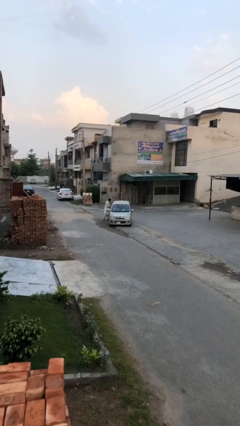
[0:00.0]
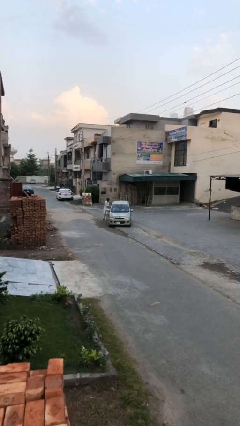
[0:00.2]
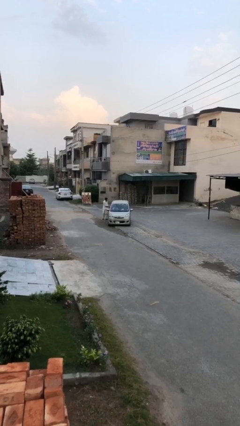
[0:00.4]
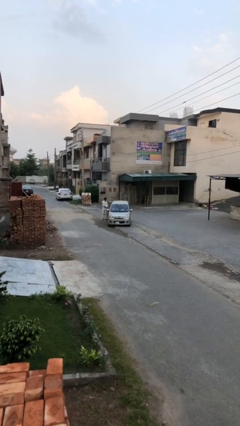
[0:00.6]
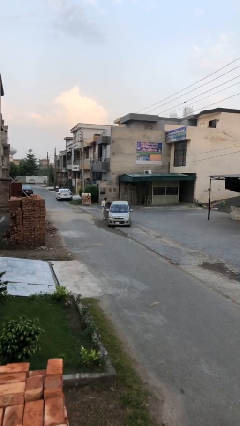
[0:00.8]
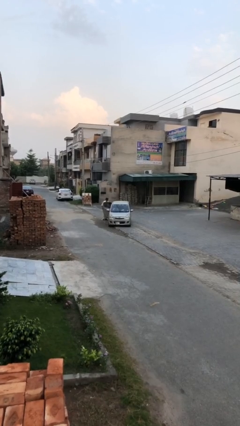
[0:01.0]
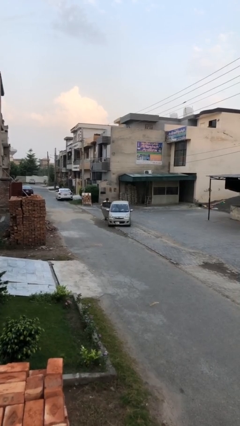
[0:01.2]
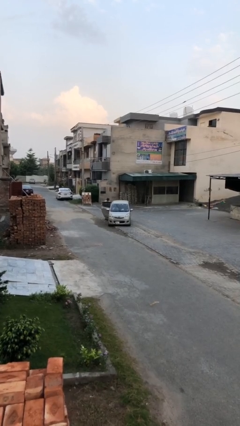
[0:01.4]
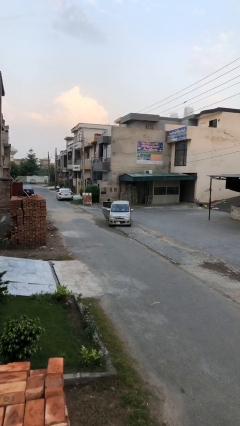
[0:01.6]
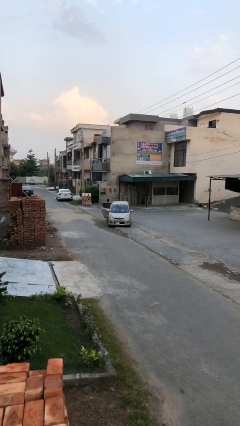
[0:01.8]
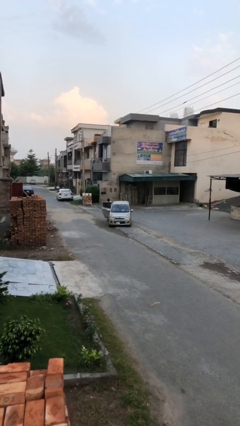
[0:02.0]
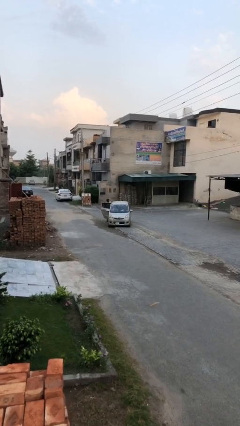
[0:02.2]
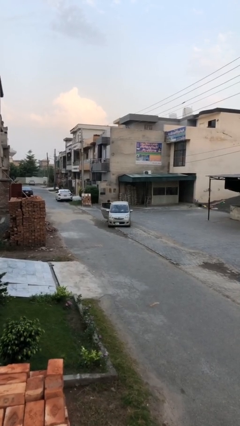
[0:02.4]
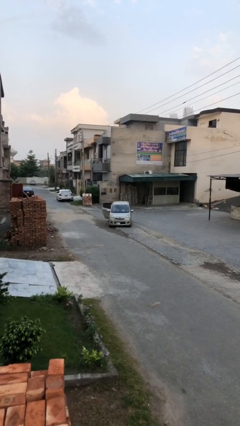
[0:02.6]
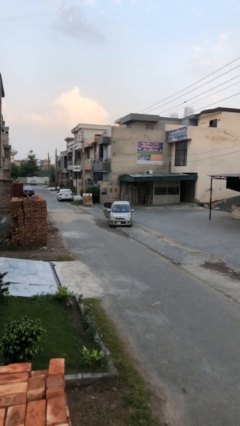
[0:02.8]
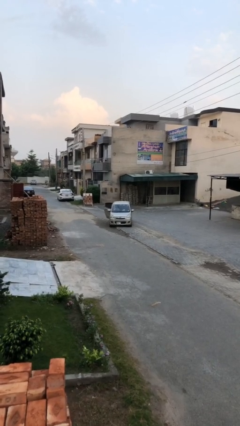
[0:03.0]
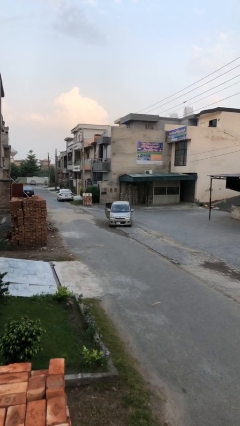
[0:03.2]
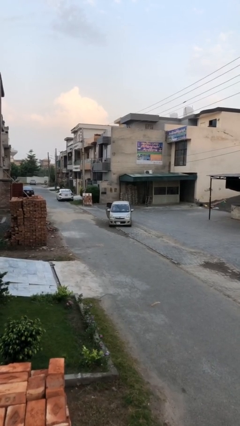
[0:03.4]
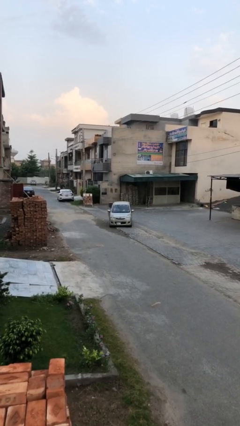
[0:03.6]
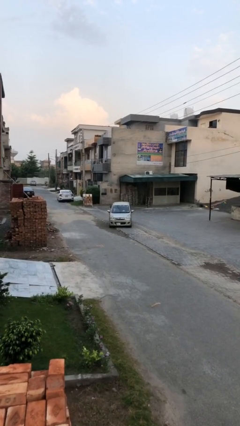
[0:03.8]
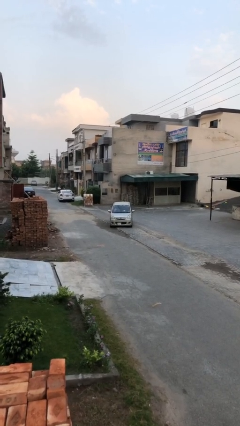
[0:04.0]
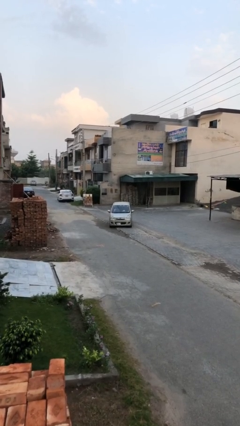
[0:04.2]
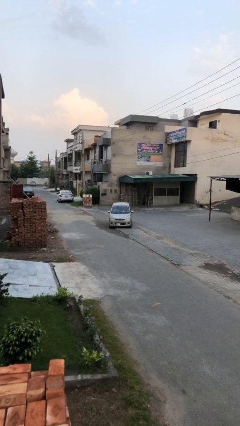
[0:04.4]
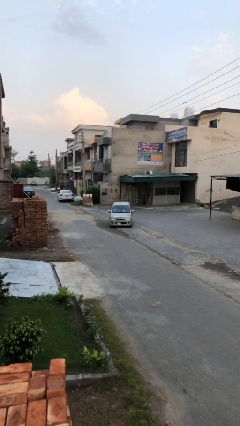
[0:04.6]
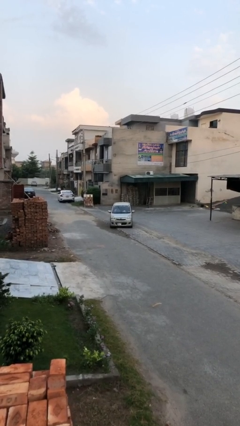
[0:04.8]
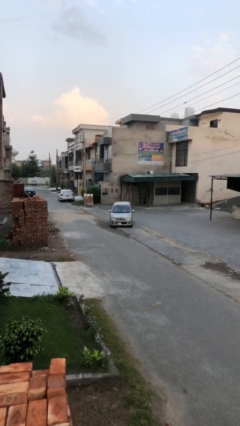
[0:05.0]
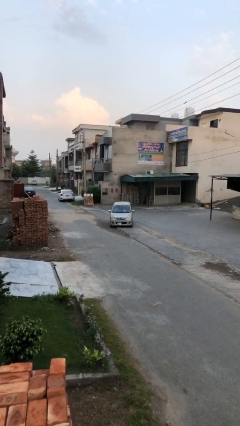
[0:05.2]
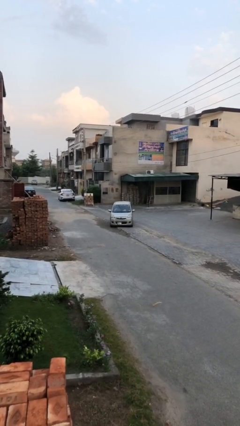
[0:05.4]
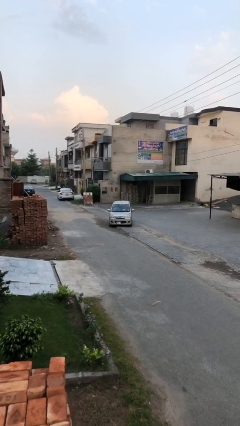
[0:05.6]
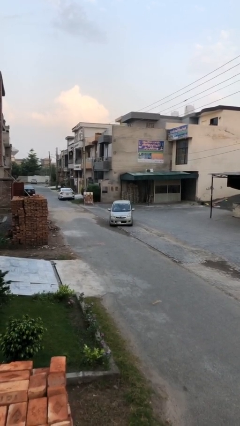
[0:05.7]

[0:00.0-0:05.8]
car picks up person

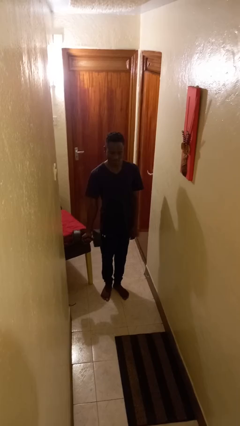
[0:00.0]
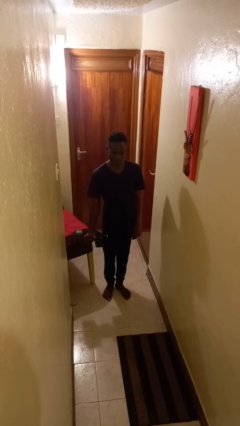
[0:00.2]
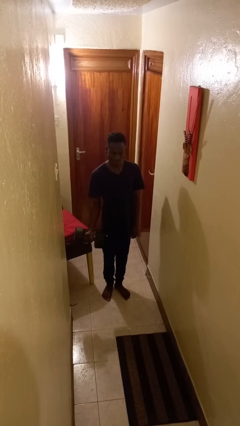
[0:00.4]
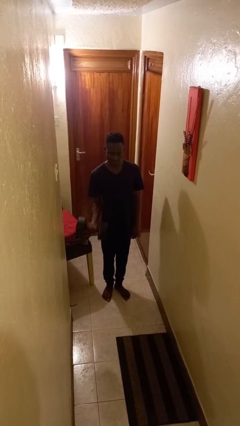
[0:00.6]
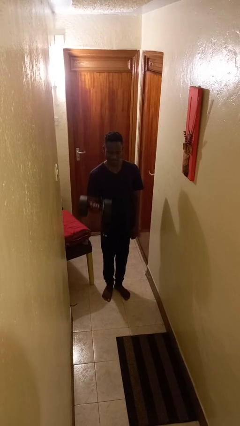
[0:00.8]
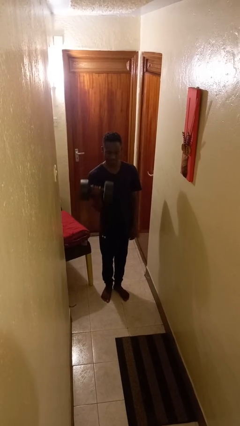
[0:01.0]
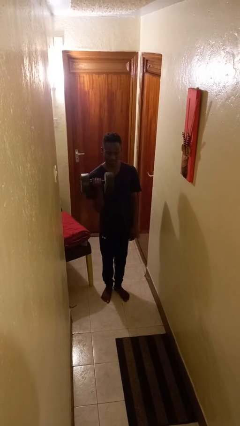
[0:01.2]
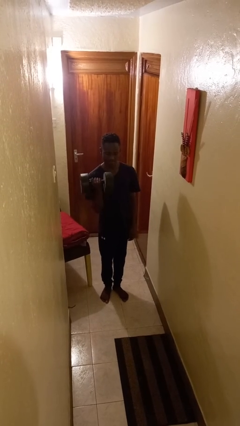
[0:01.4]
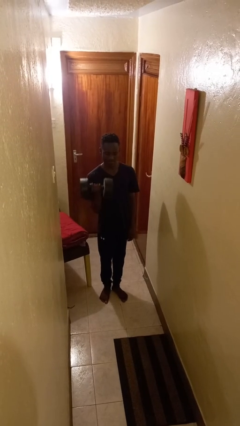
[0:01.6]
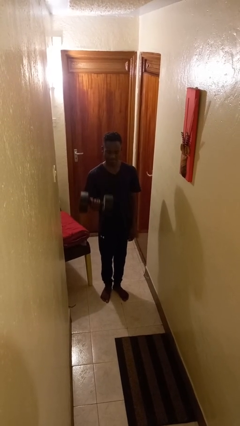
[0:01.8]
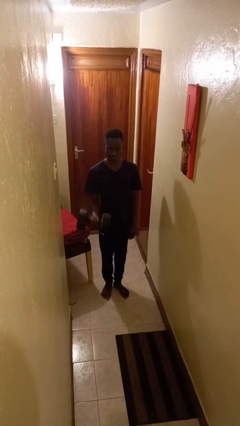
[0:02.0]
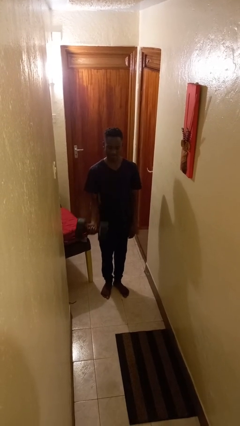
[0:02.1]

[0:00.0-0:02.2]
person lifts dumbbells

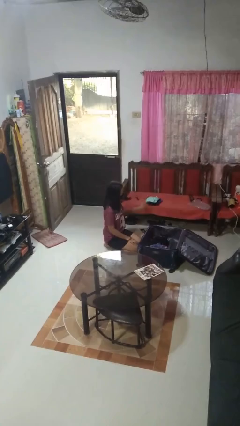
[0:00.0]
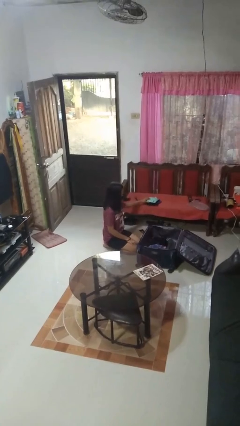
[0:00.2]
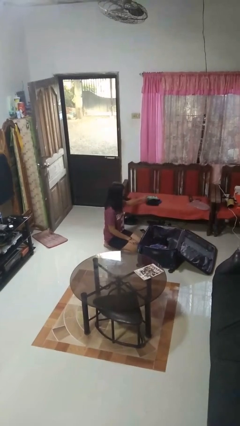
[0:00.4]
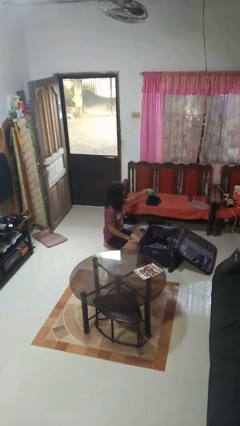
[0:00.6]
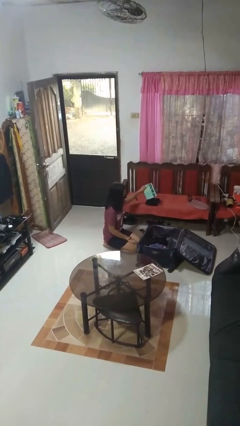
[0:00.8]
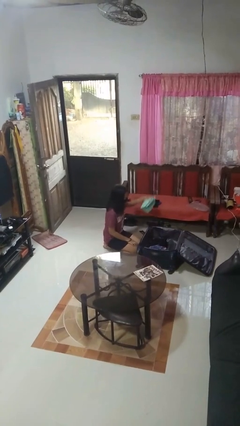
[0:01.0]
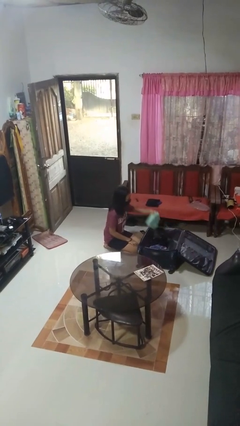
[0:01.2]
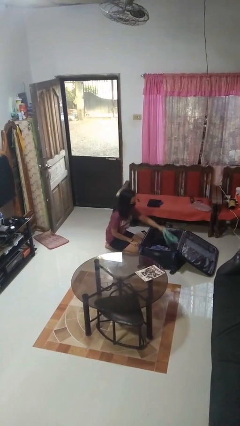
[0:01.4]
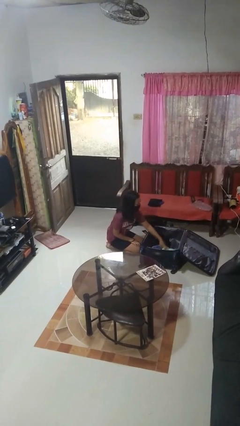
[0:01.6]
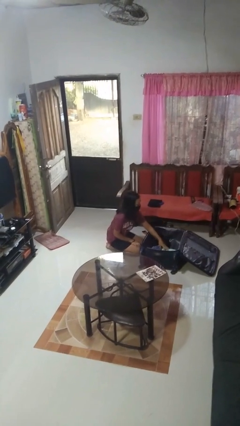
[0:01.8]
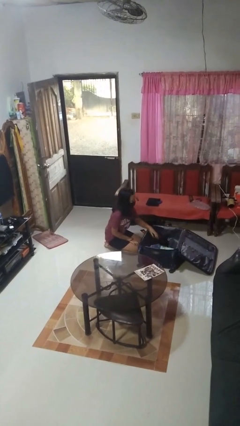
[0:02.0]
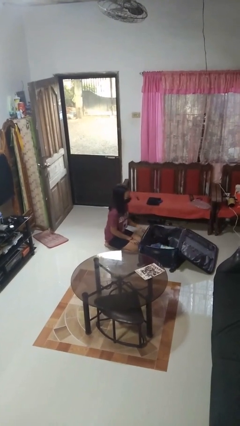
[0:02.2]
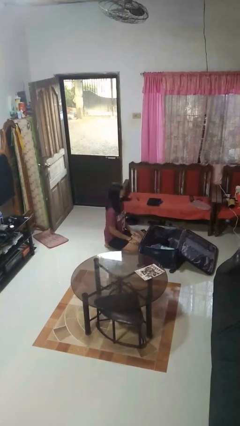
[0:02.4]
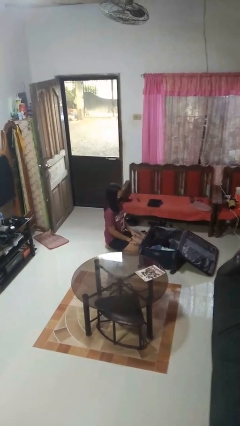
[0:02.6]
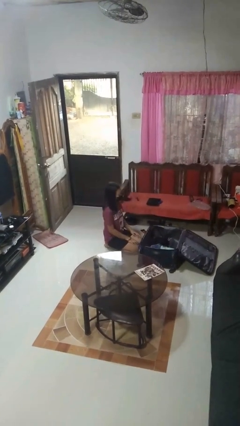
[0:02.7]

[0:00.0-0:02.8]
person loads clothes into suitcase

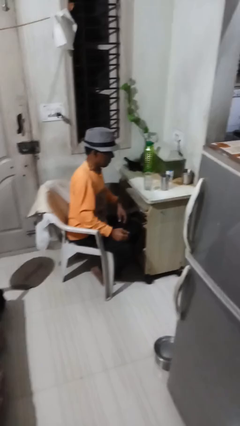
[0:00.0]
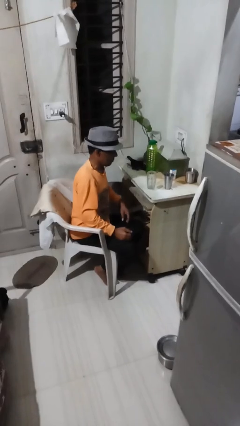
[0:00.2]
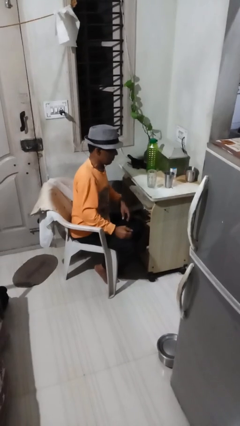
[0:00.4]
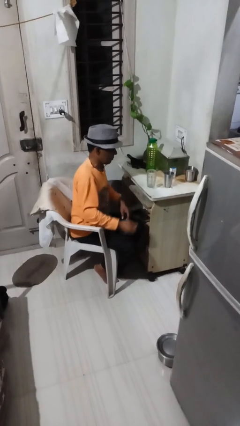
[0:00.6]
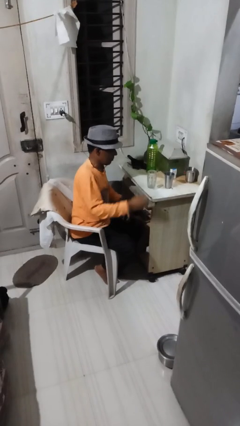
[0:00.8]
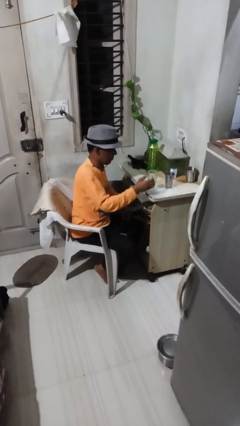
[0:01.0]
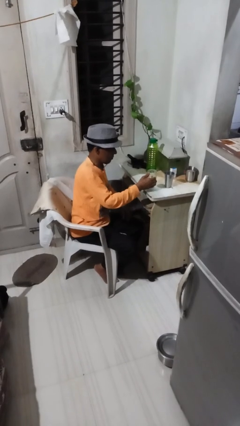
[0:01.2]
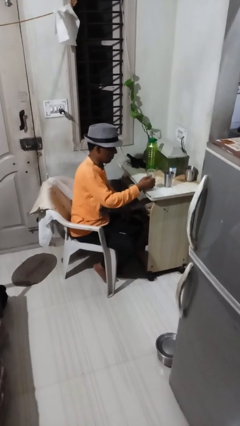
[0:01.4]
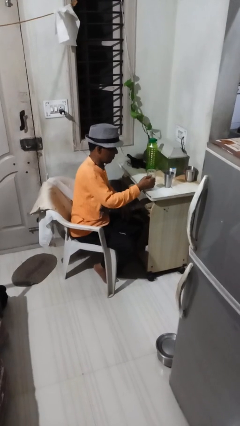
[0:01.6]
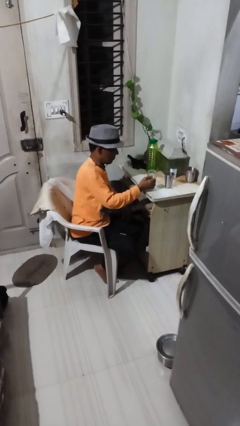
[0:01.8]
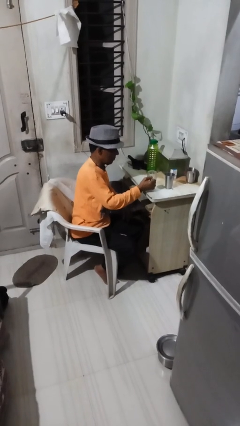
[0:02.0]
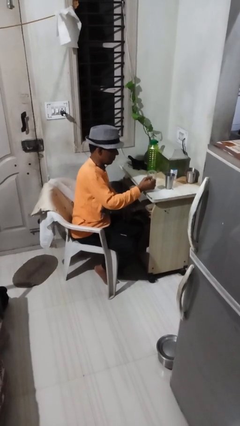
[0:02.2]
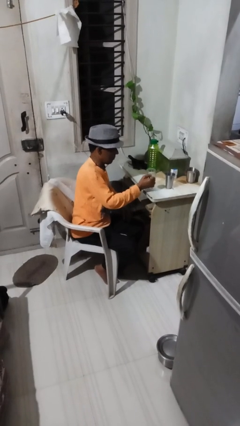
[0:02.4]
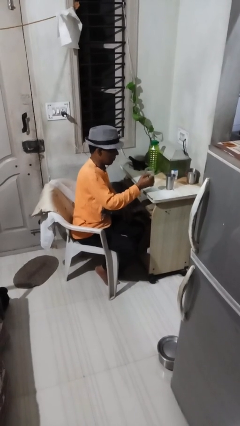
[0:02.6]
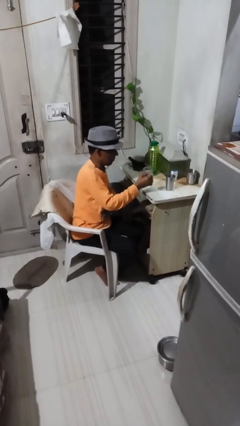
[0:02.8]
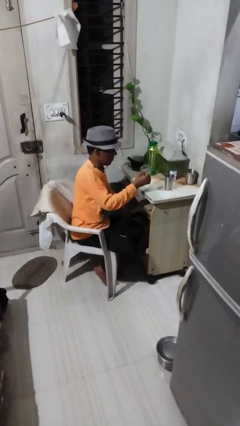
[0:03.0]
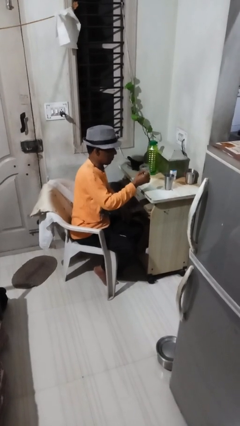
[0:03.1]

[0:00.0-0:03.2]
person picks up object from table

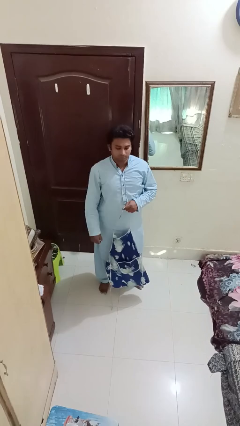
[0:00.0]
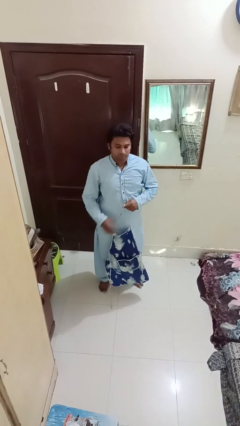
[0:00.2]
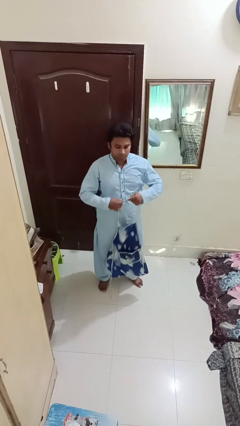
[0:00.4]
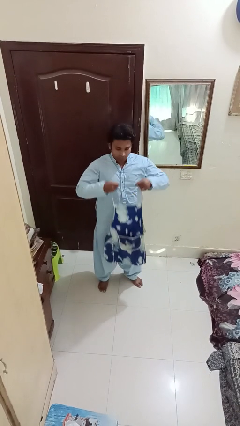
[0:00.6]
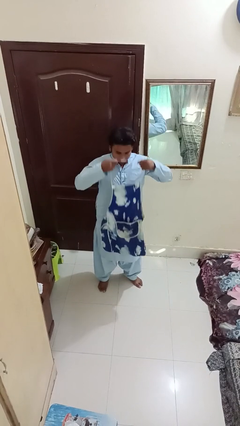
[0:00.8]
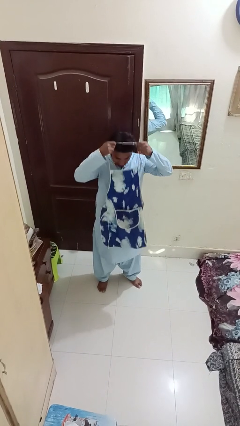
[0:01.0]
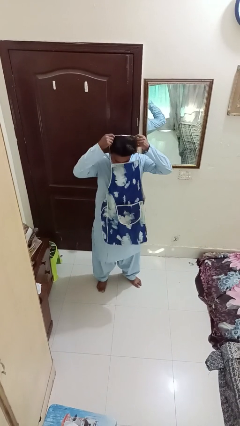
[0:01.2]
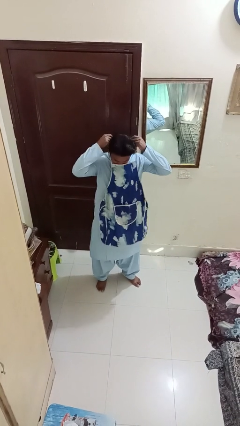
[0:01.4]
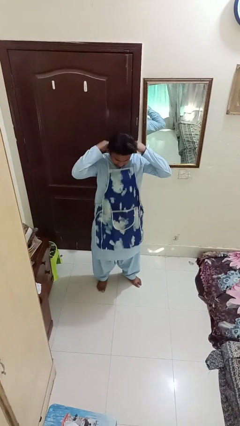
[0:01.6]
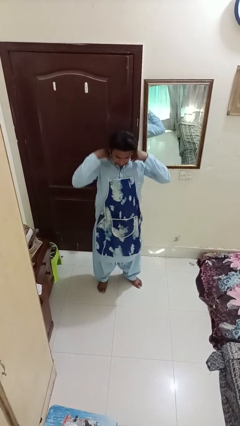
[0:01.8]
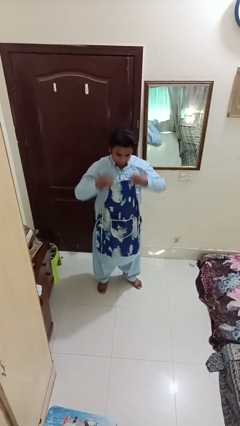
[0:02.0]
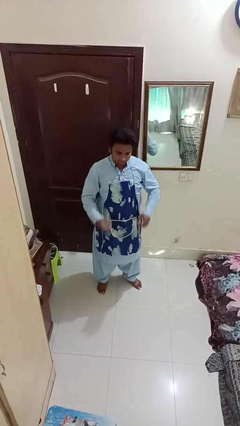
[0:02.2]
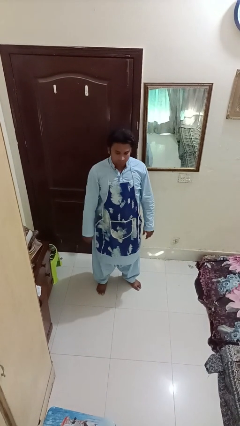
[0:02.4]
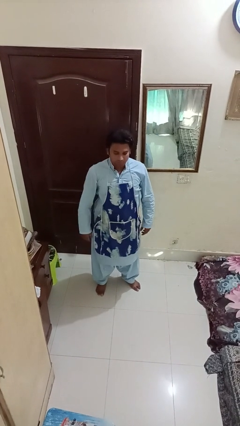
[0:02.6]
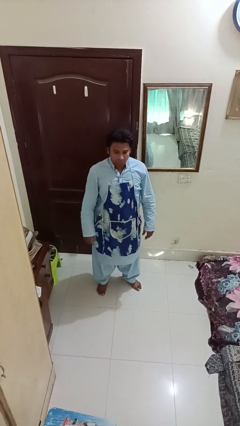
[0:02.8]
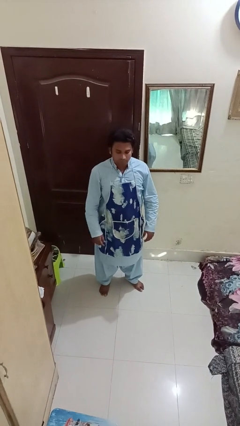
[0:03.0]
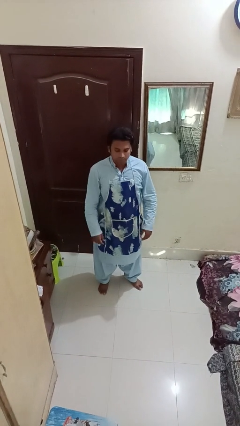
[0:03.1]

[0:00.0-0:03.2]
person puts on apron
